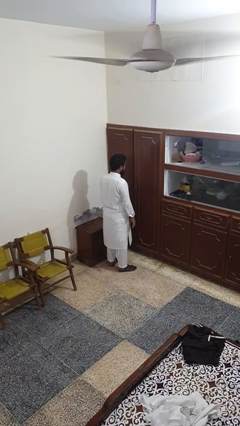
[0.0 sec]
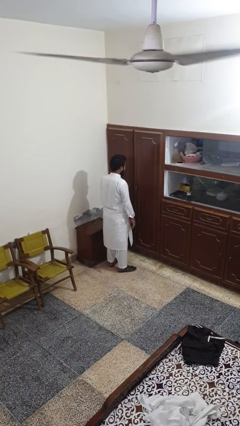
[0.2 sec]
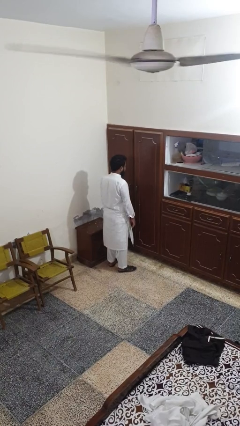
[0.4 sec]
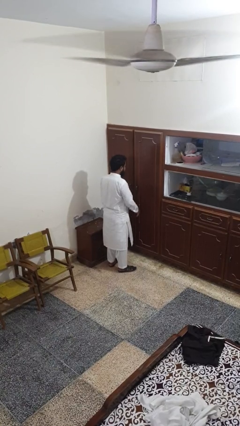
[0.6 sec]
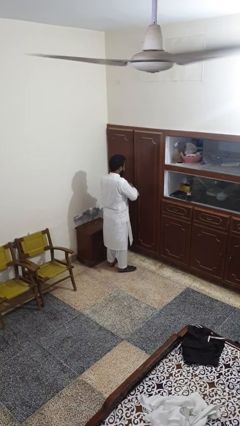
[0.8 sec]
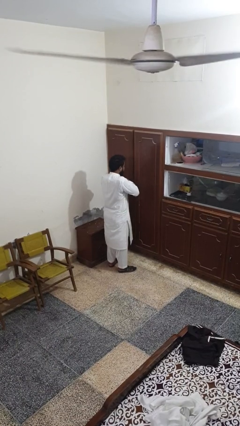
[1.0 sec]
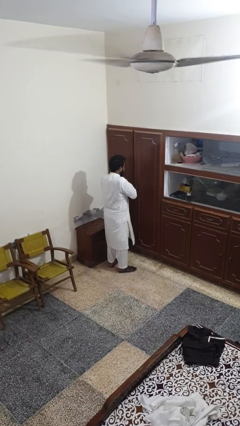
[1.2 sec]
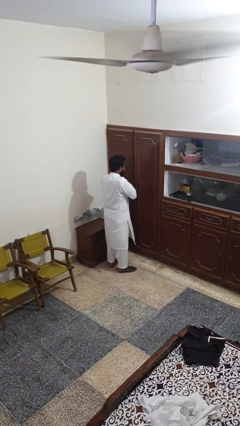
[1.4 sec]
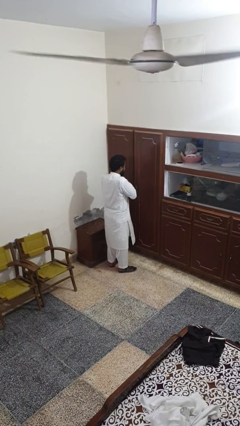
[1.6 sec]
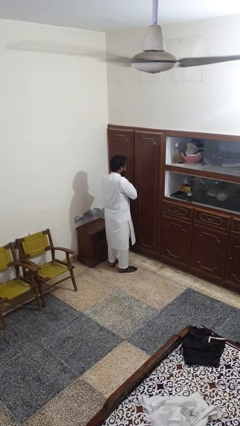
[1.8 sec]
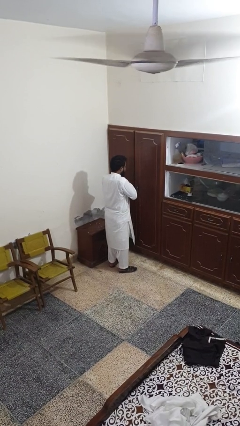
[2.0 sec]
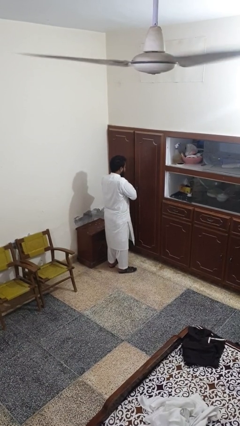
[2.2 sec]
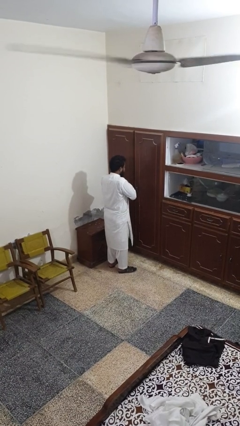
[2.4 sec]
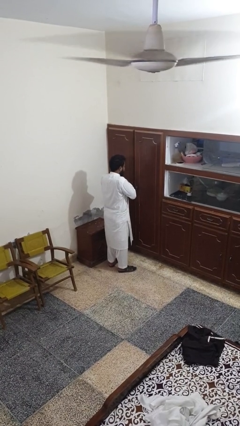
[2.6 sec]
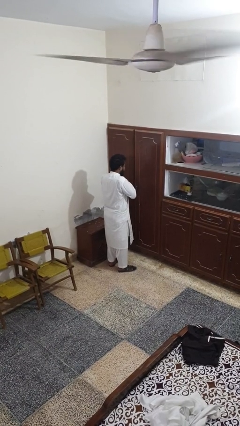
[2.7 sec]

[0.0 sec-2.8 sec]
person prays

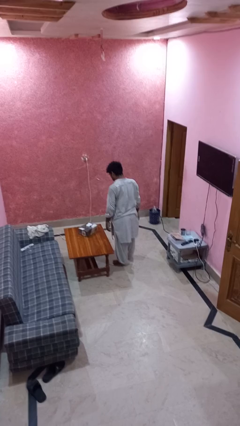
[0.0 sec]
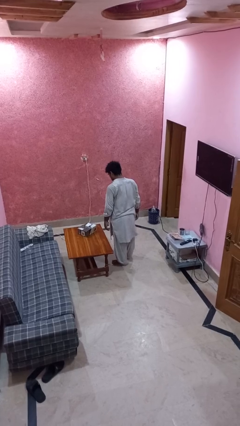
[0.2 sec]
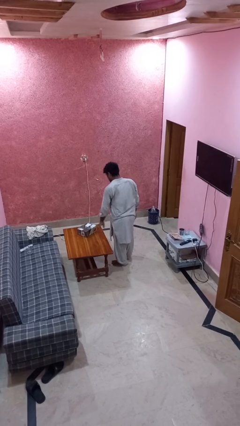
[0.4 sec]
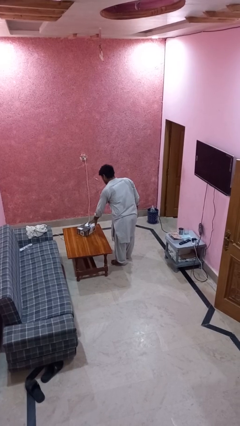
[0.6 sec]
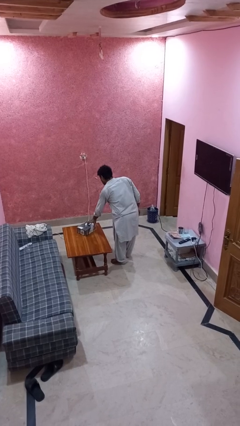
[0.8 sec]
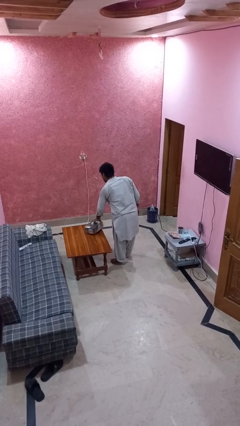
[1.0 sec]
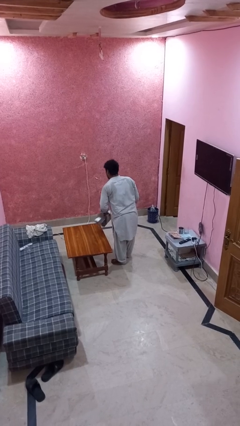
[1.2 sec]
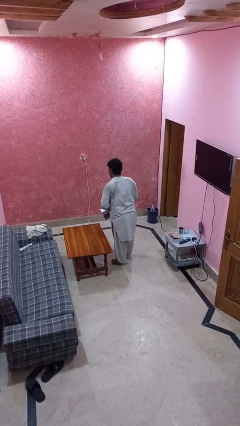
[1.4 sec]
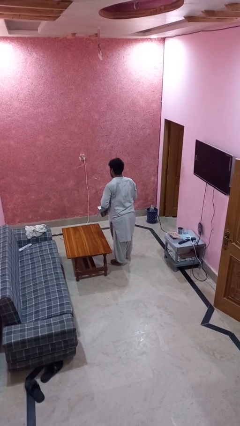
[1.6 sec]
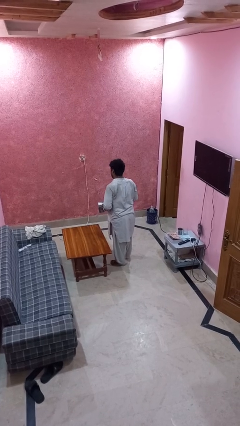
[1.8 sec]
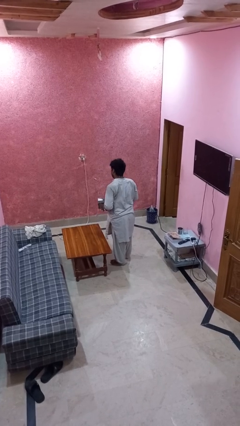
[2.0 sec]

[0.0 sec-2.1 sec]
person picks up object from table

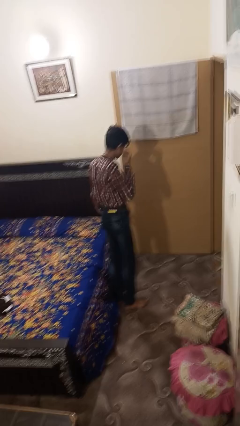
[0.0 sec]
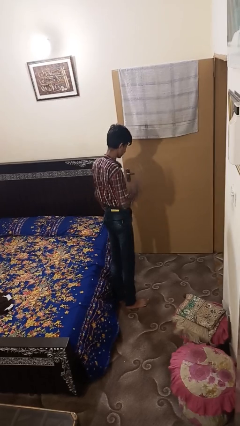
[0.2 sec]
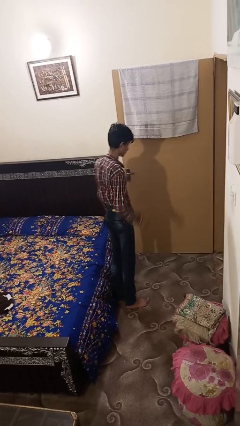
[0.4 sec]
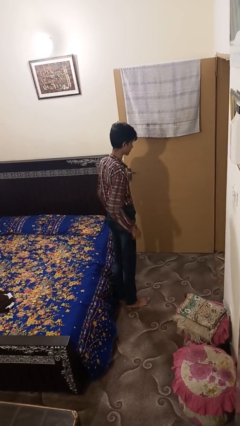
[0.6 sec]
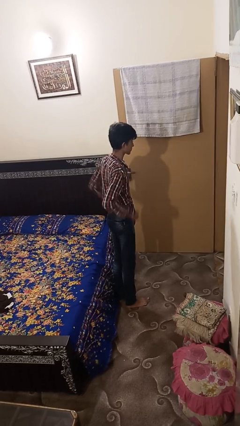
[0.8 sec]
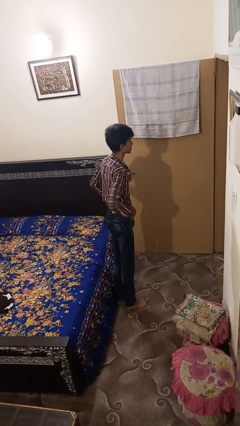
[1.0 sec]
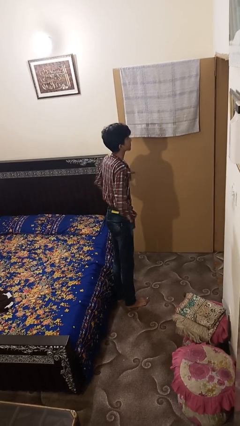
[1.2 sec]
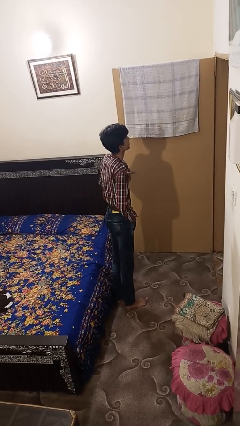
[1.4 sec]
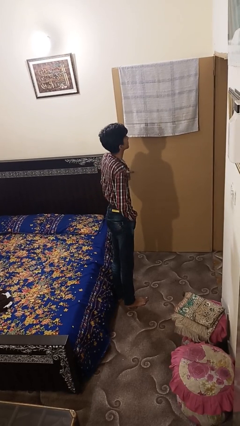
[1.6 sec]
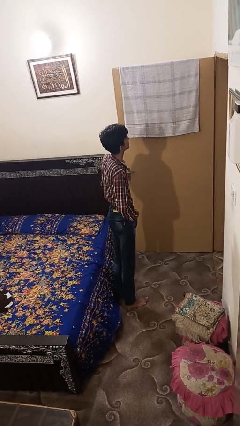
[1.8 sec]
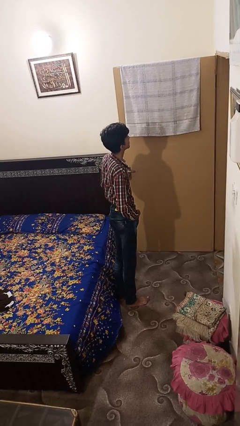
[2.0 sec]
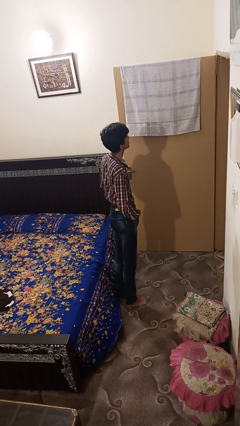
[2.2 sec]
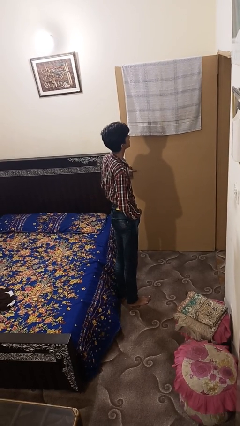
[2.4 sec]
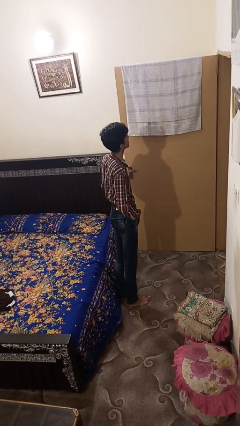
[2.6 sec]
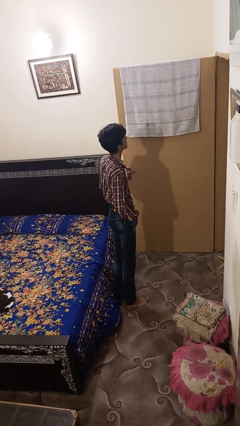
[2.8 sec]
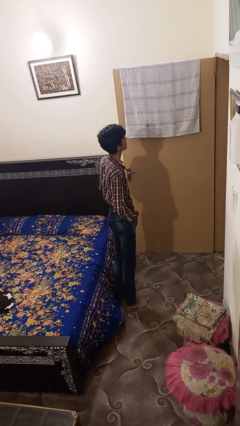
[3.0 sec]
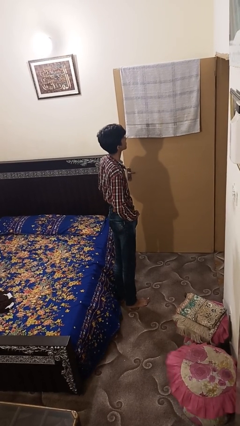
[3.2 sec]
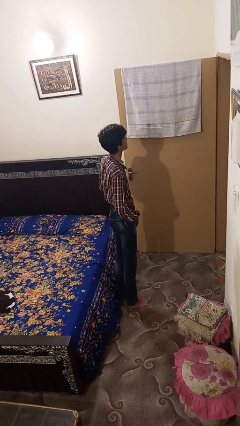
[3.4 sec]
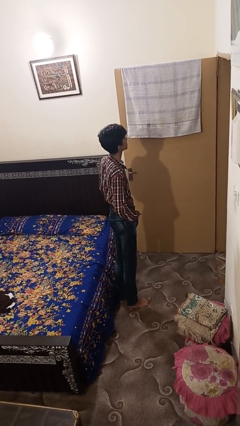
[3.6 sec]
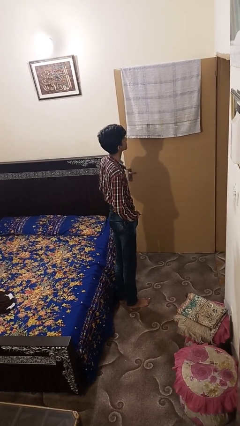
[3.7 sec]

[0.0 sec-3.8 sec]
person puts hands in back pockets

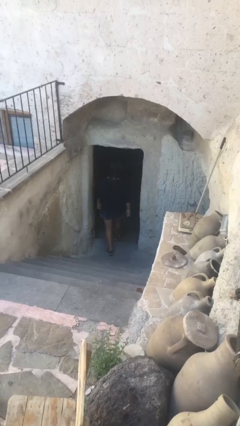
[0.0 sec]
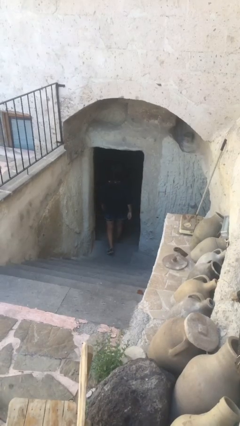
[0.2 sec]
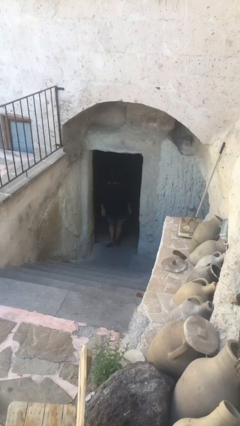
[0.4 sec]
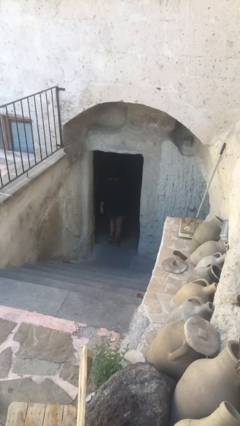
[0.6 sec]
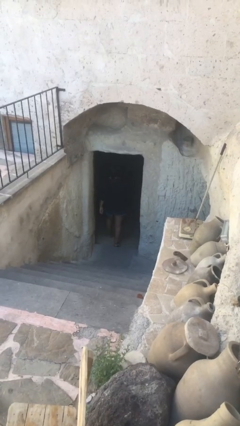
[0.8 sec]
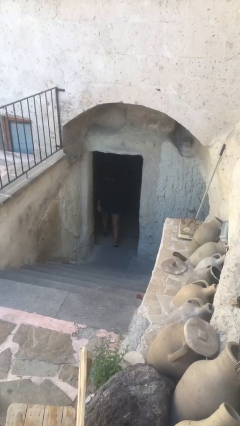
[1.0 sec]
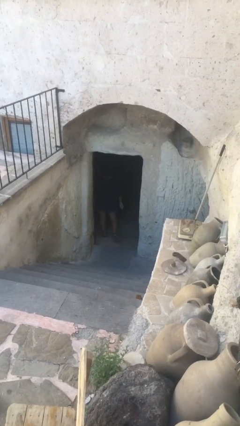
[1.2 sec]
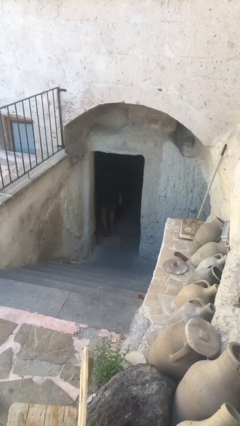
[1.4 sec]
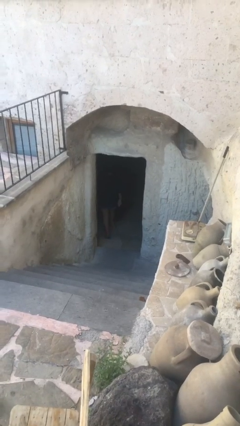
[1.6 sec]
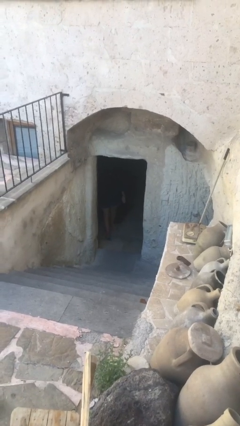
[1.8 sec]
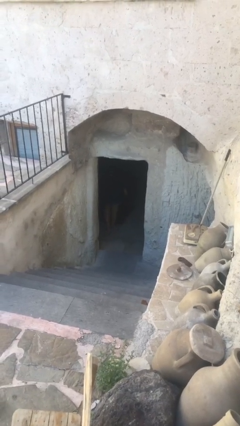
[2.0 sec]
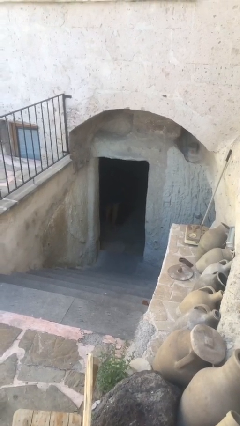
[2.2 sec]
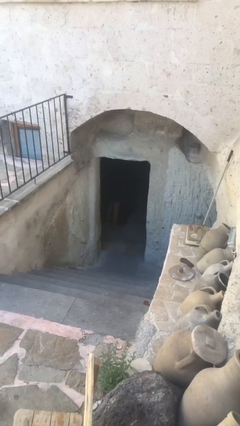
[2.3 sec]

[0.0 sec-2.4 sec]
person exits scene through structure

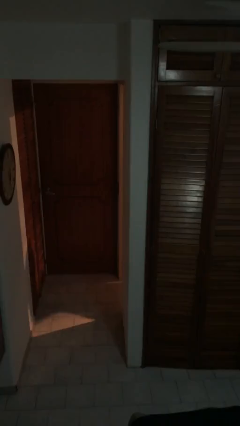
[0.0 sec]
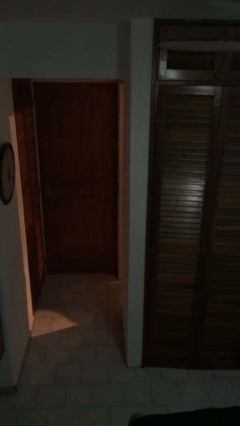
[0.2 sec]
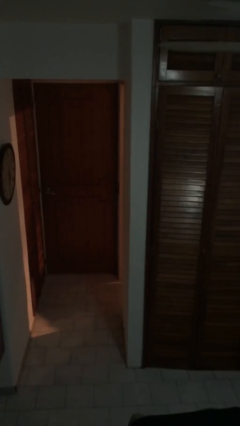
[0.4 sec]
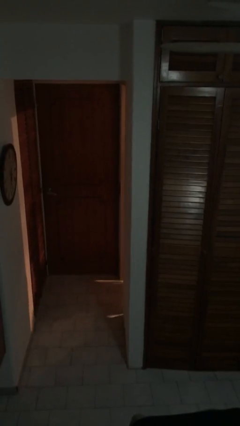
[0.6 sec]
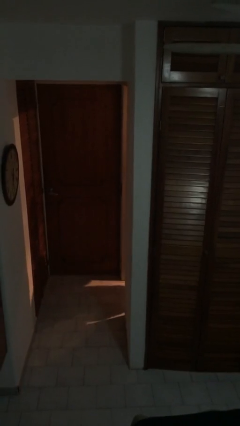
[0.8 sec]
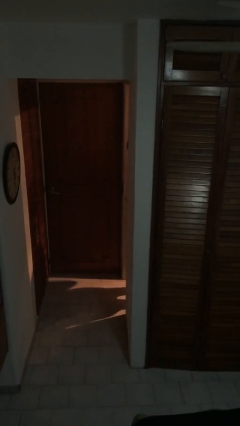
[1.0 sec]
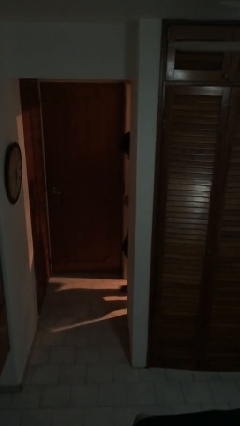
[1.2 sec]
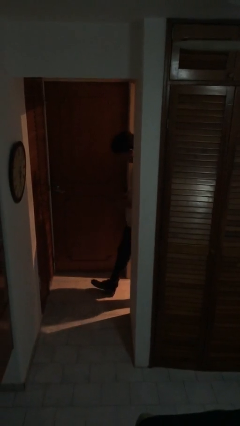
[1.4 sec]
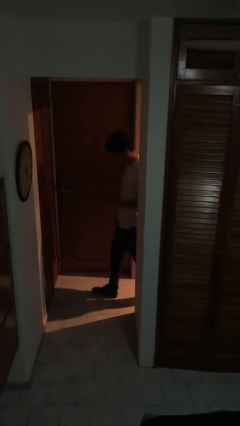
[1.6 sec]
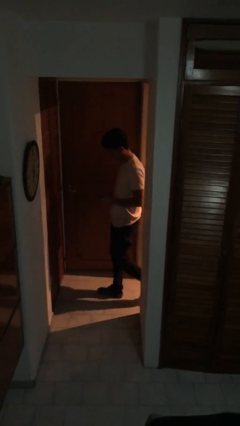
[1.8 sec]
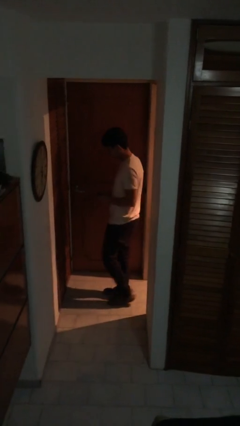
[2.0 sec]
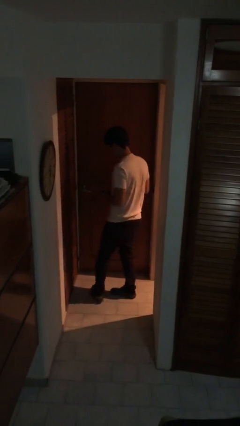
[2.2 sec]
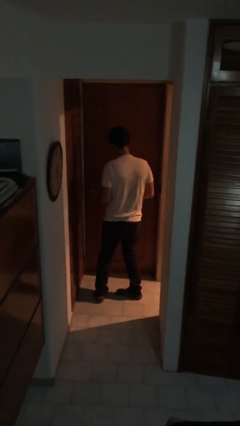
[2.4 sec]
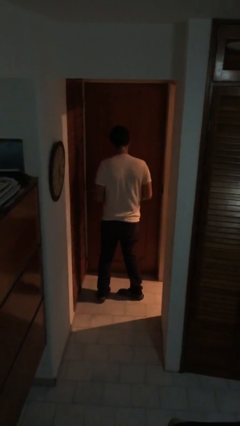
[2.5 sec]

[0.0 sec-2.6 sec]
person enters scene through structure

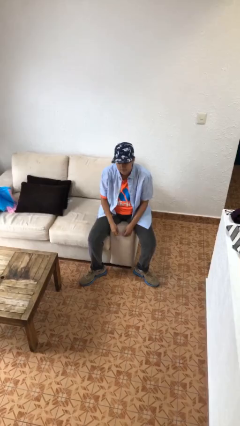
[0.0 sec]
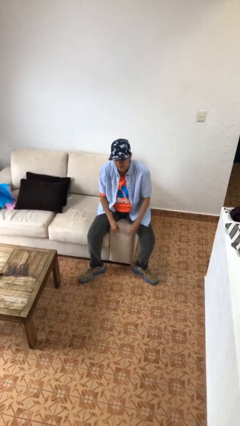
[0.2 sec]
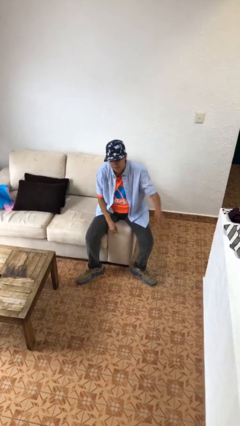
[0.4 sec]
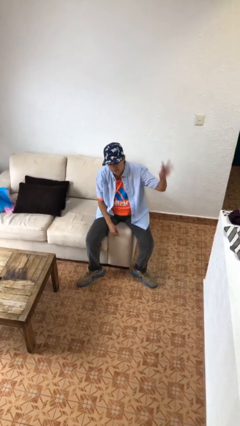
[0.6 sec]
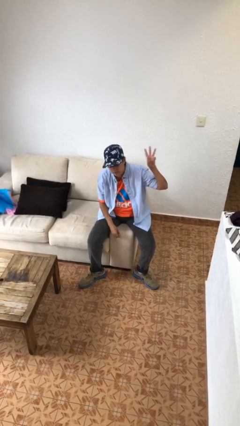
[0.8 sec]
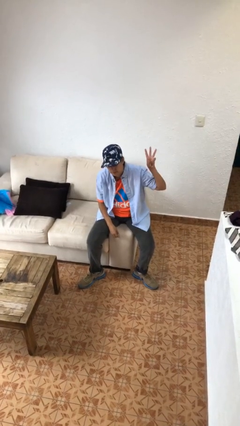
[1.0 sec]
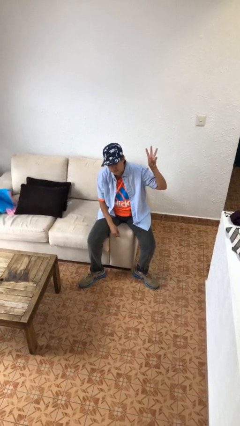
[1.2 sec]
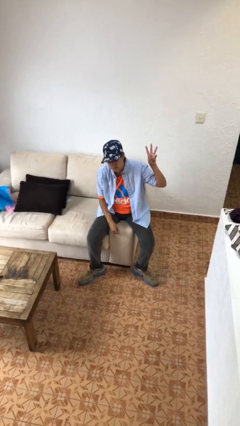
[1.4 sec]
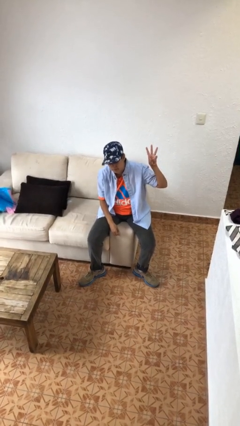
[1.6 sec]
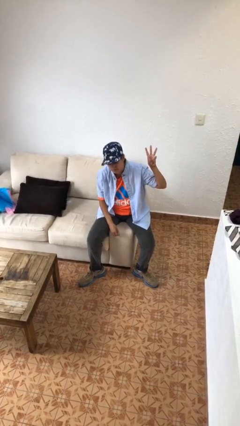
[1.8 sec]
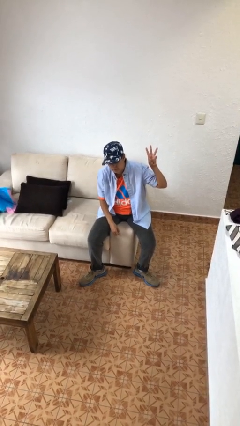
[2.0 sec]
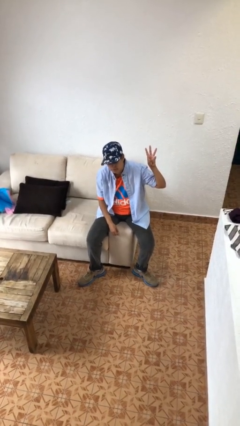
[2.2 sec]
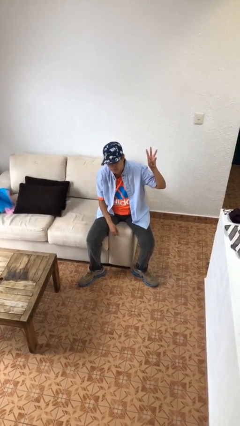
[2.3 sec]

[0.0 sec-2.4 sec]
person gestures number three

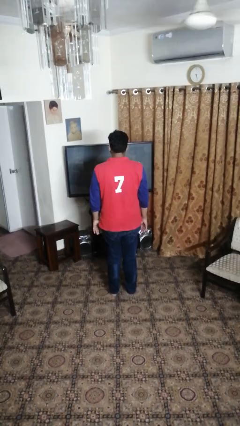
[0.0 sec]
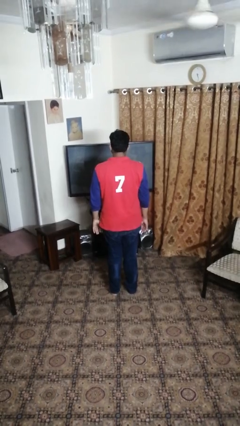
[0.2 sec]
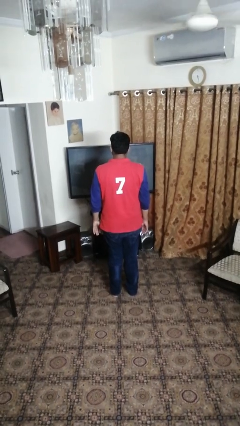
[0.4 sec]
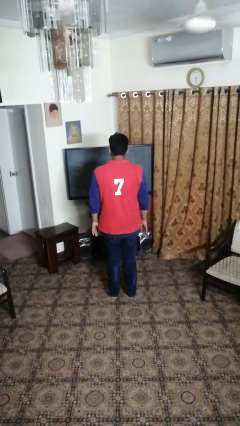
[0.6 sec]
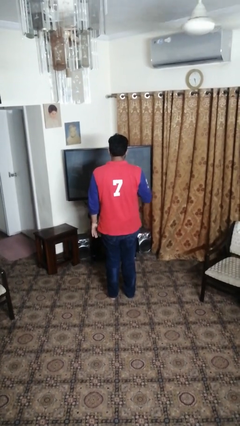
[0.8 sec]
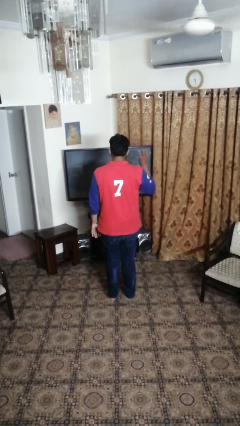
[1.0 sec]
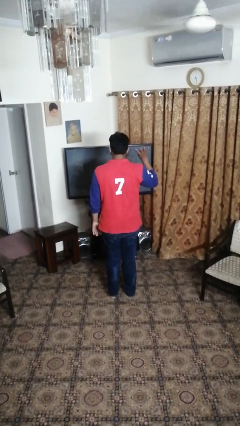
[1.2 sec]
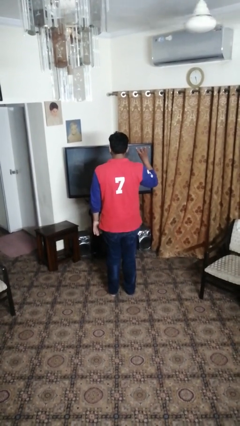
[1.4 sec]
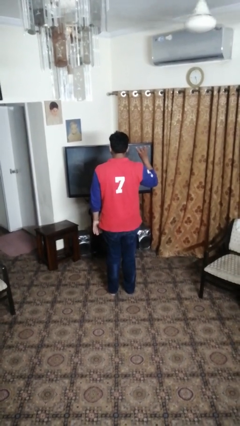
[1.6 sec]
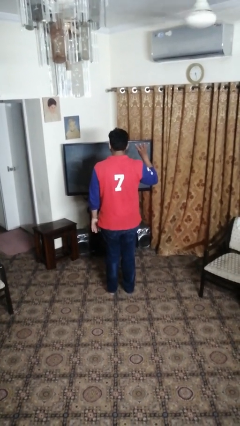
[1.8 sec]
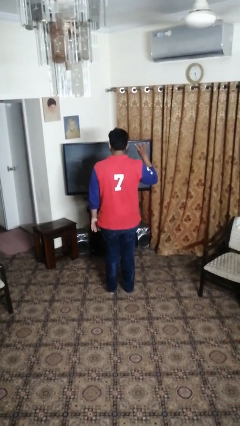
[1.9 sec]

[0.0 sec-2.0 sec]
person gestures number four
